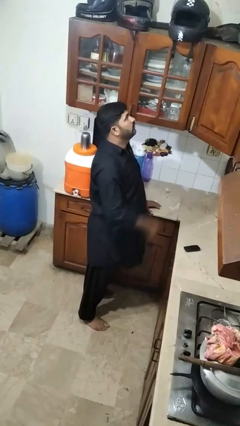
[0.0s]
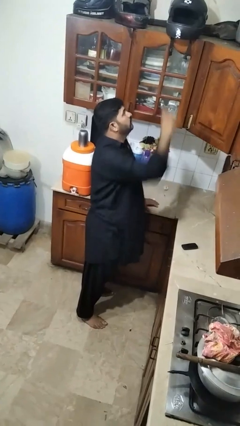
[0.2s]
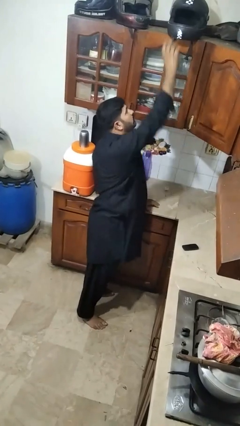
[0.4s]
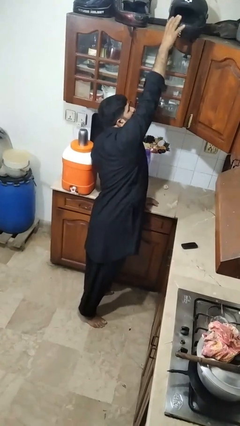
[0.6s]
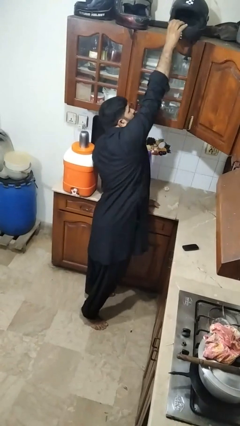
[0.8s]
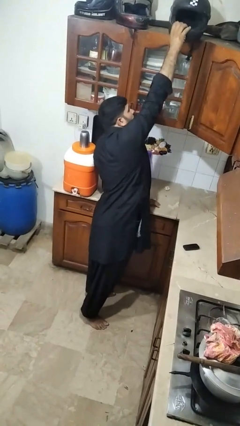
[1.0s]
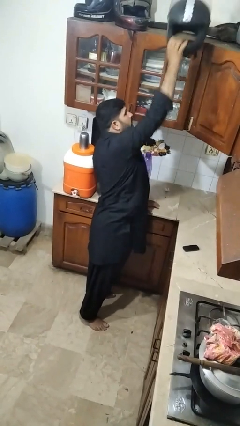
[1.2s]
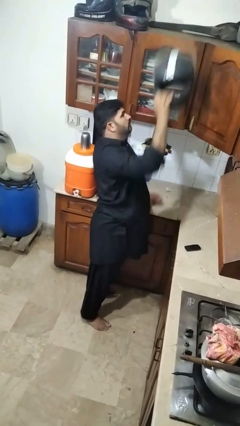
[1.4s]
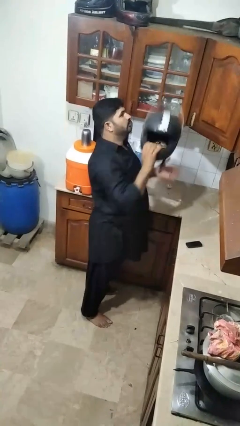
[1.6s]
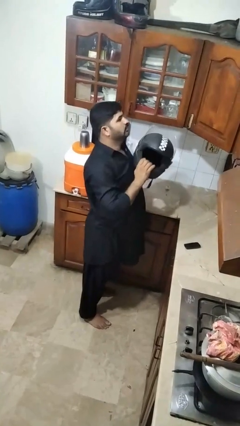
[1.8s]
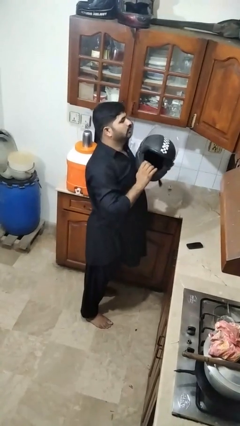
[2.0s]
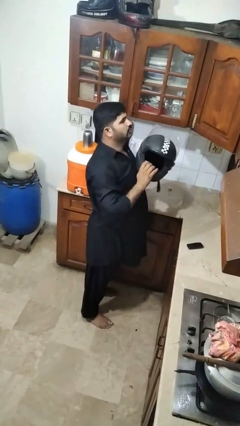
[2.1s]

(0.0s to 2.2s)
person picks up object from shelf

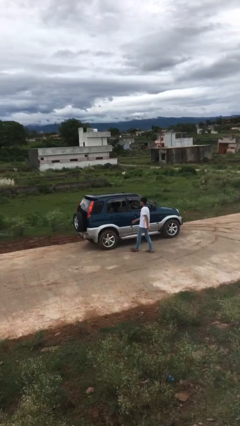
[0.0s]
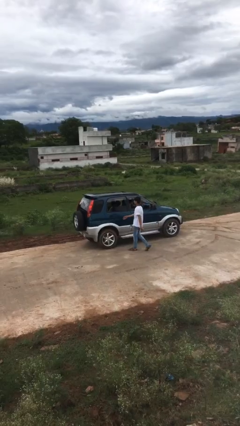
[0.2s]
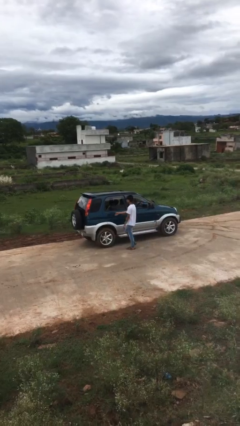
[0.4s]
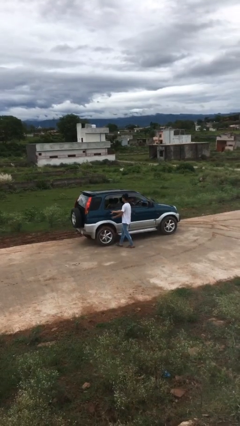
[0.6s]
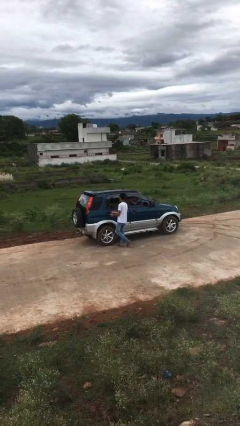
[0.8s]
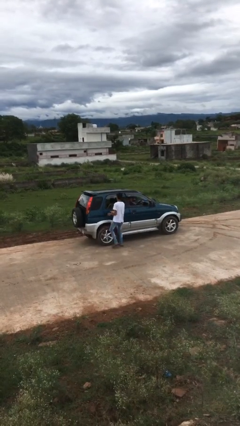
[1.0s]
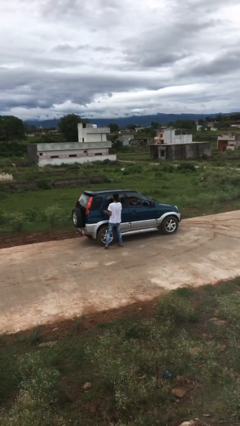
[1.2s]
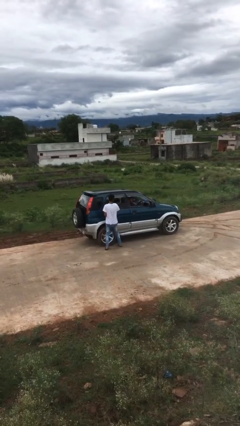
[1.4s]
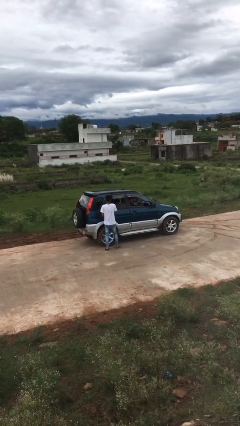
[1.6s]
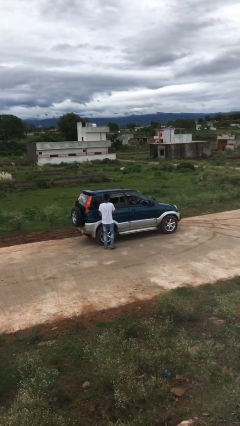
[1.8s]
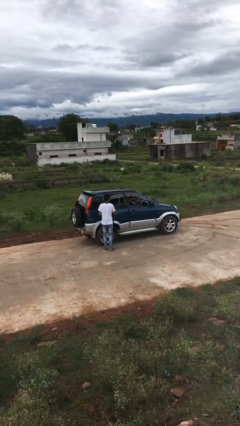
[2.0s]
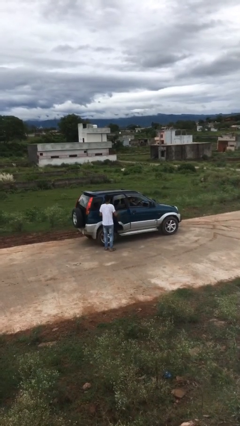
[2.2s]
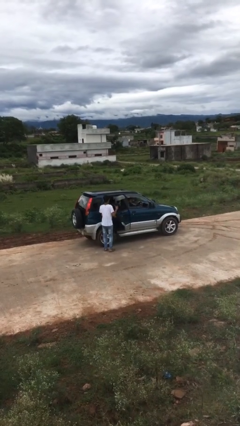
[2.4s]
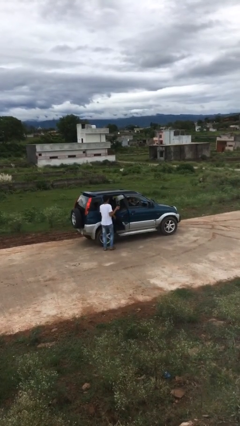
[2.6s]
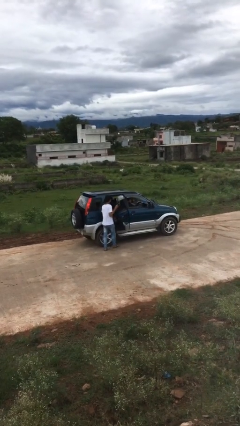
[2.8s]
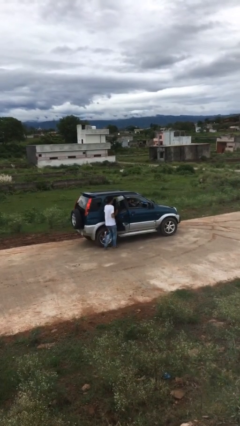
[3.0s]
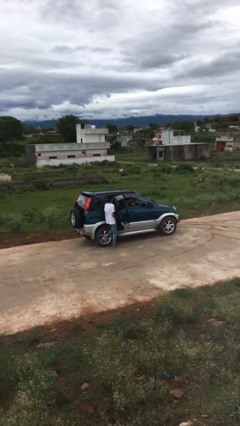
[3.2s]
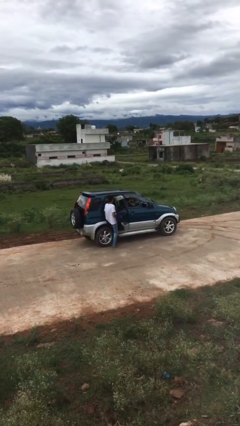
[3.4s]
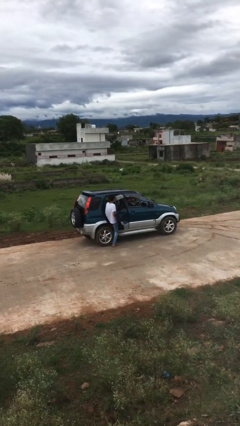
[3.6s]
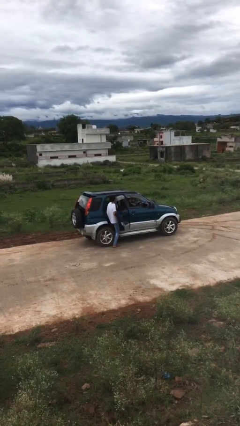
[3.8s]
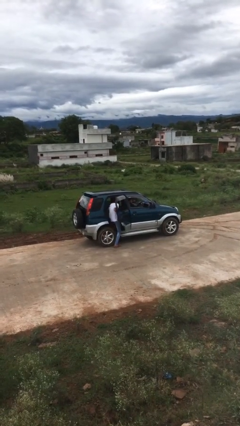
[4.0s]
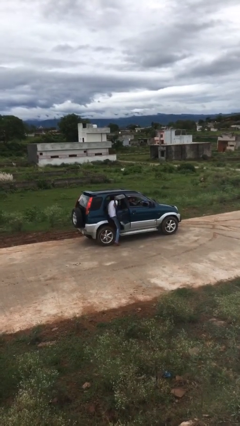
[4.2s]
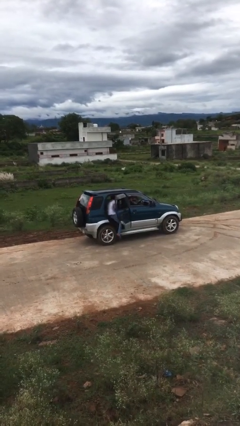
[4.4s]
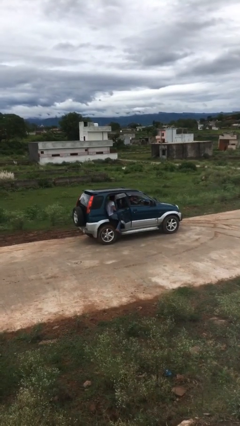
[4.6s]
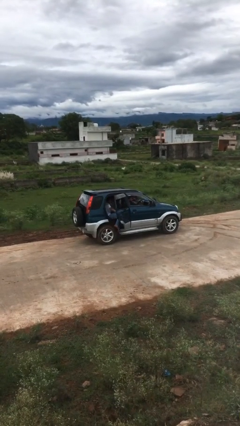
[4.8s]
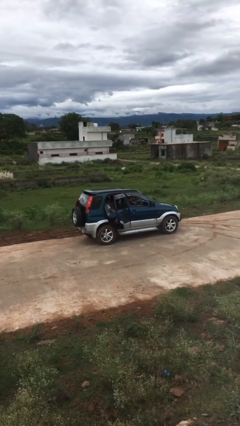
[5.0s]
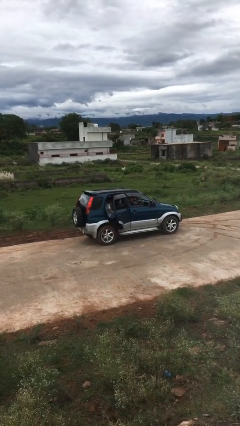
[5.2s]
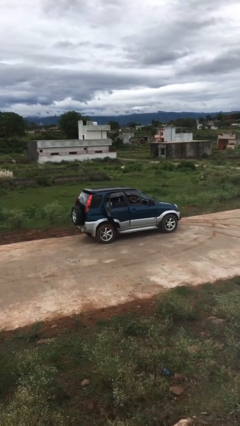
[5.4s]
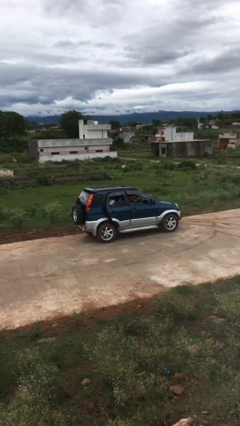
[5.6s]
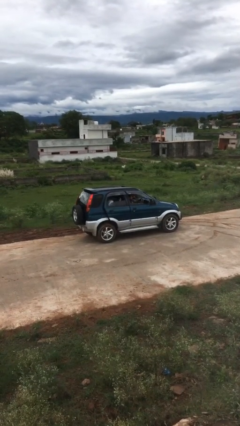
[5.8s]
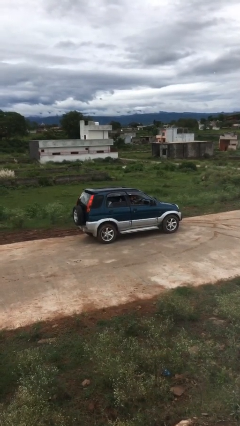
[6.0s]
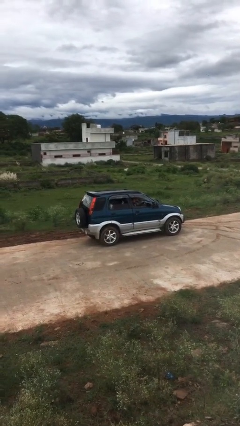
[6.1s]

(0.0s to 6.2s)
car picks up person

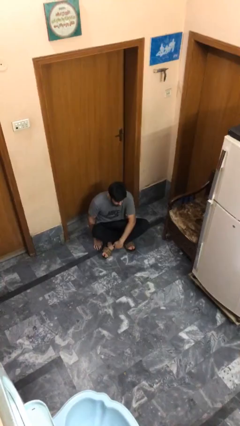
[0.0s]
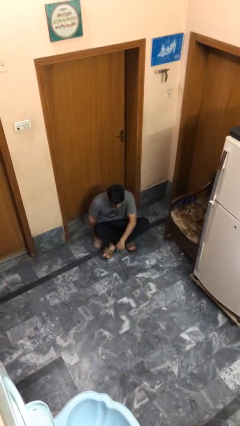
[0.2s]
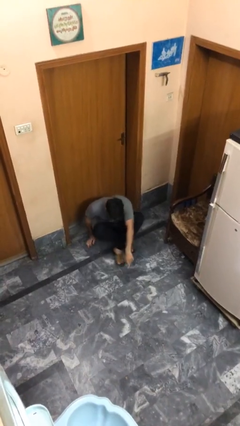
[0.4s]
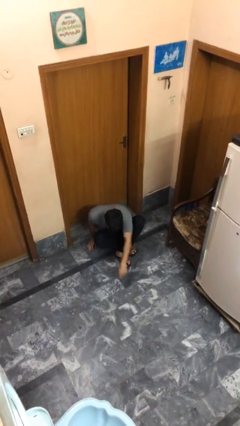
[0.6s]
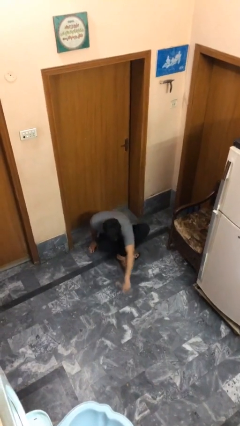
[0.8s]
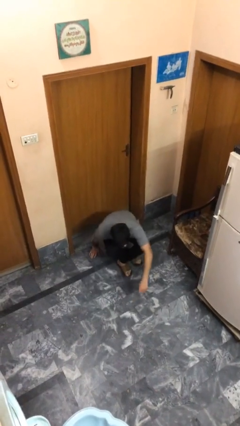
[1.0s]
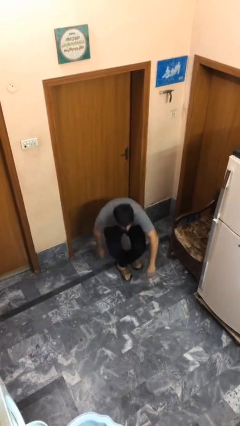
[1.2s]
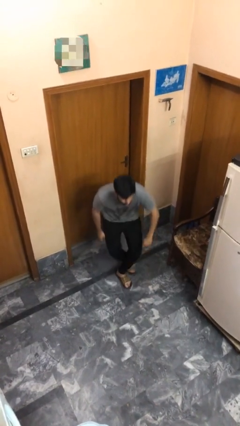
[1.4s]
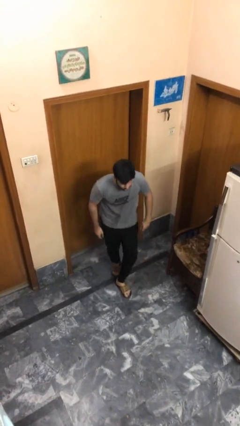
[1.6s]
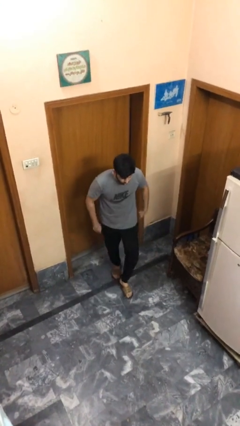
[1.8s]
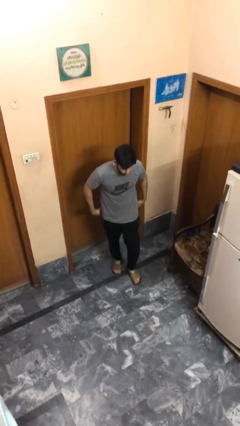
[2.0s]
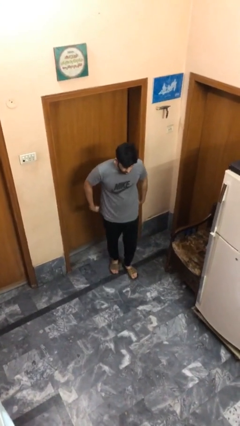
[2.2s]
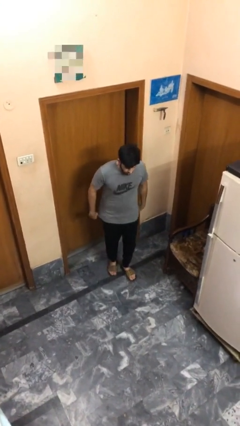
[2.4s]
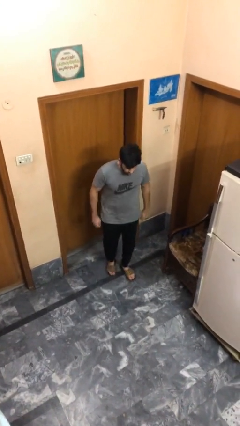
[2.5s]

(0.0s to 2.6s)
person stands up from floor

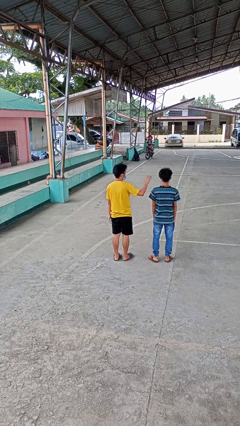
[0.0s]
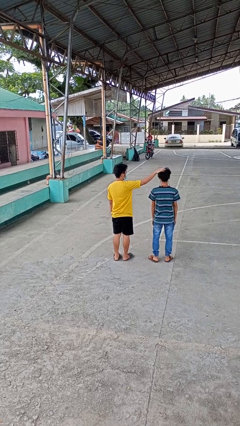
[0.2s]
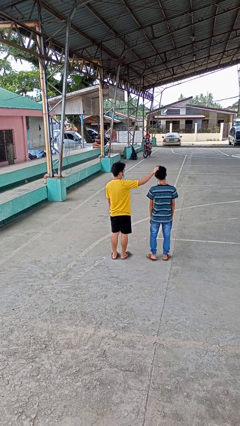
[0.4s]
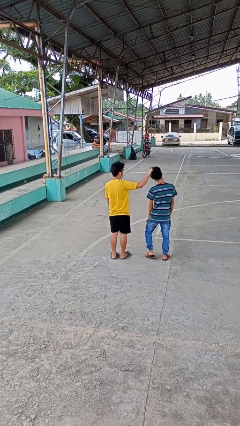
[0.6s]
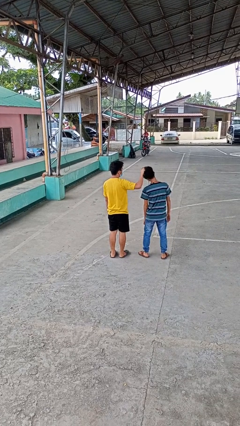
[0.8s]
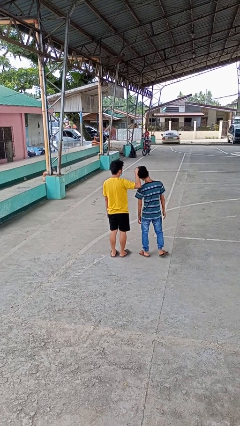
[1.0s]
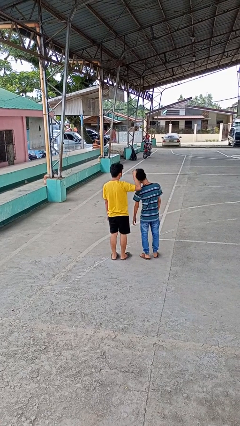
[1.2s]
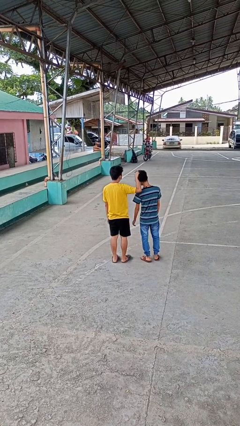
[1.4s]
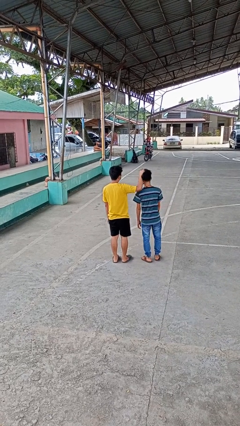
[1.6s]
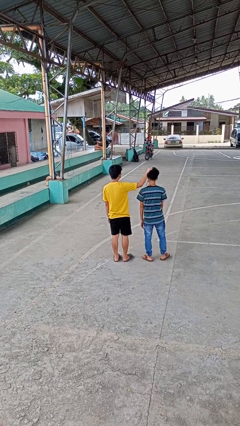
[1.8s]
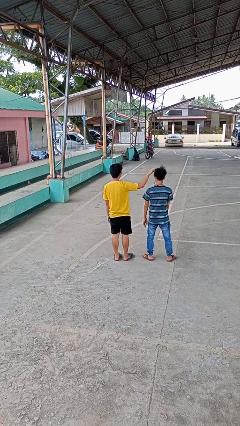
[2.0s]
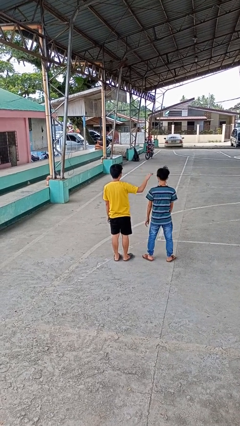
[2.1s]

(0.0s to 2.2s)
person grabs person by hair

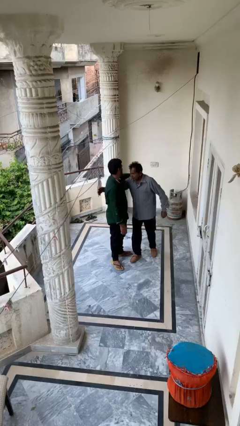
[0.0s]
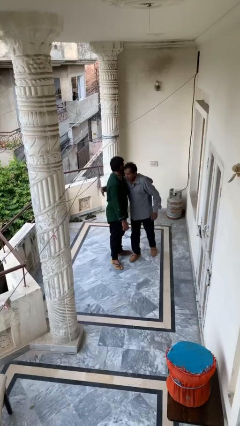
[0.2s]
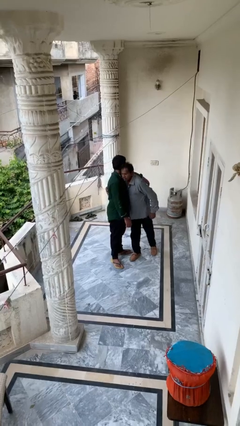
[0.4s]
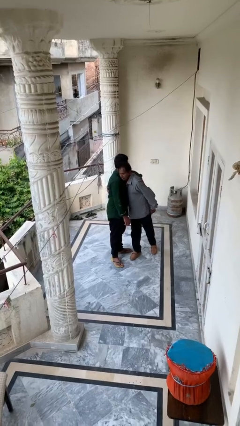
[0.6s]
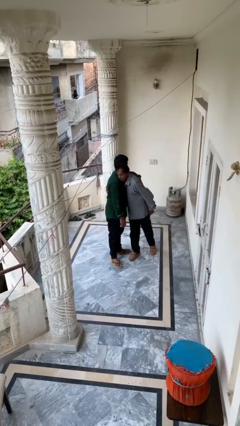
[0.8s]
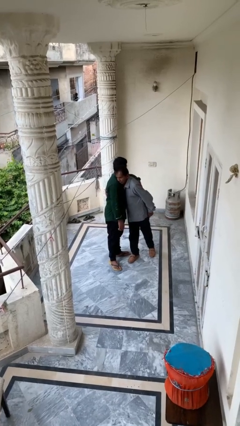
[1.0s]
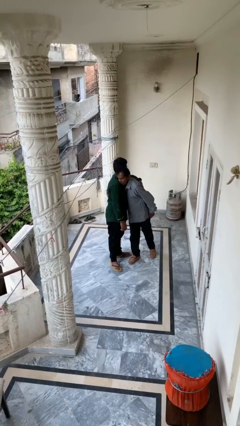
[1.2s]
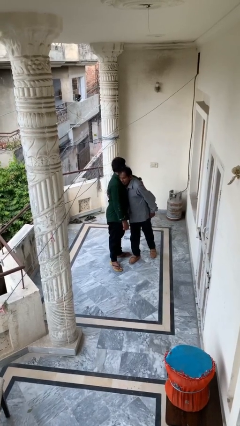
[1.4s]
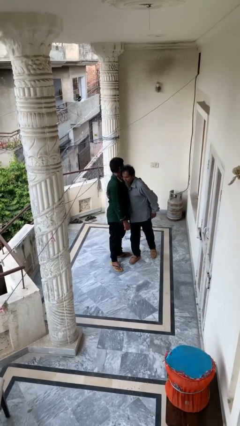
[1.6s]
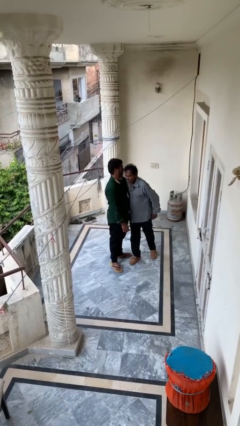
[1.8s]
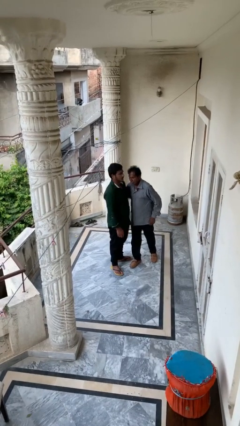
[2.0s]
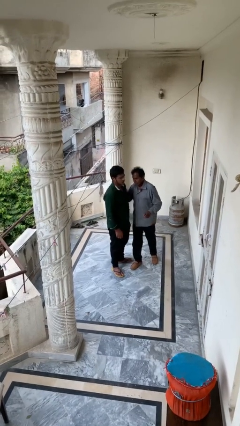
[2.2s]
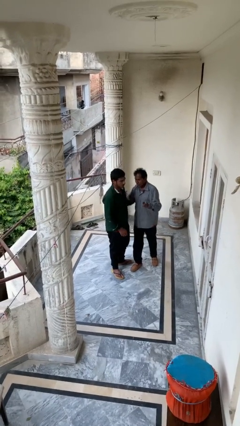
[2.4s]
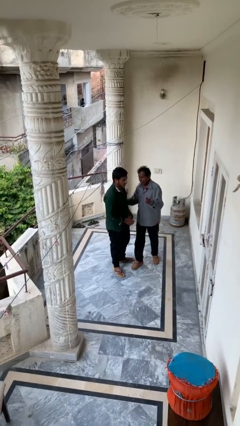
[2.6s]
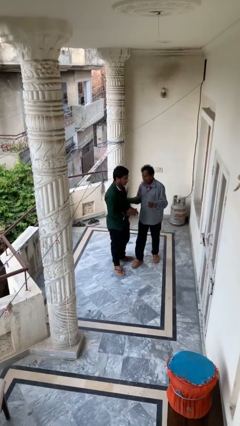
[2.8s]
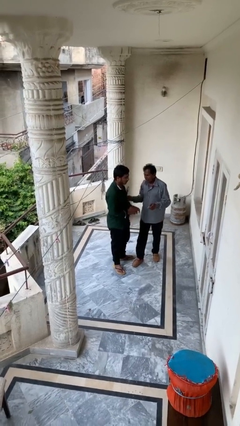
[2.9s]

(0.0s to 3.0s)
person embraces person

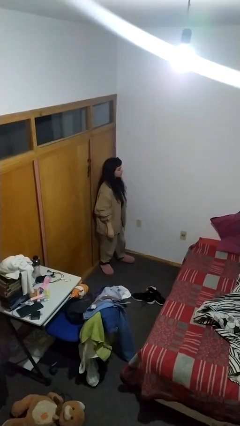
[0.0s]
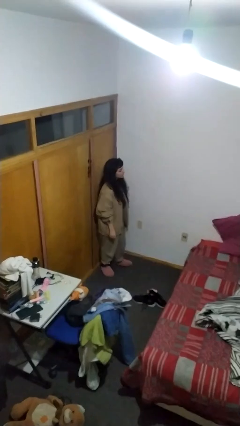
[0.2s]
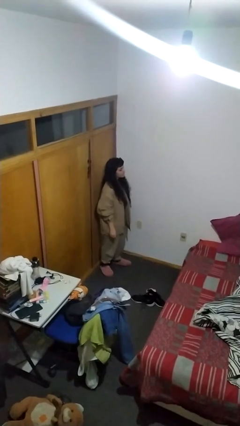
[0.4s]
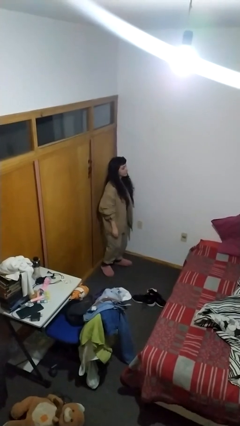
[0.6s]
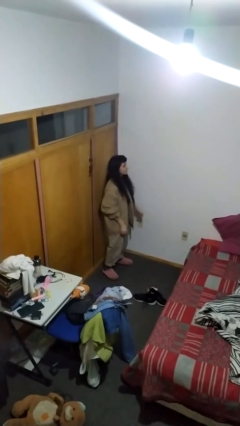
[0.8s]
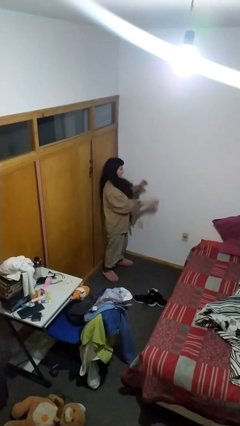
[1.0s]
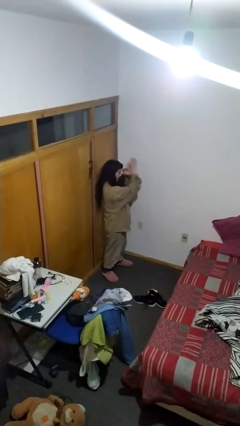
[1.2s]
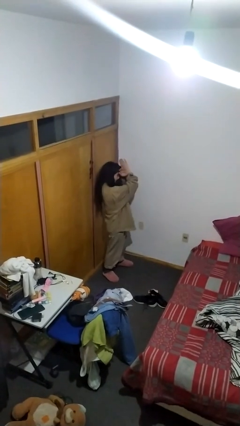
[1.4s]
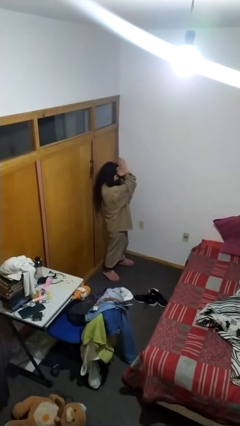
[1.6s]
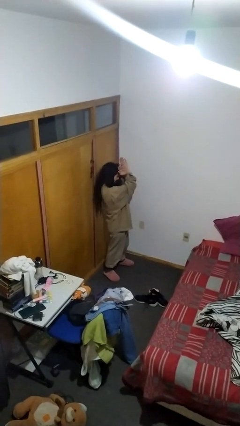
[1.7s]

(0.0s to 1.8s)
person gestures arms x
